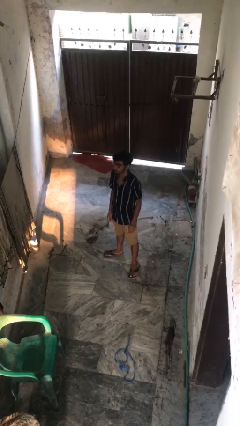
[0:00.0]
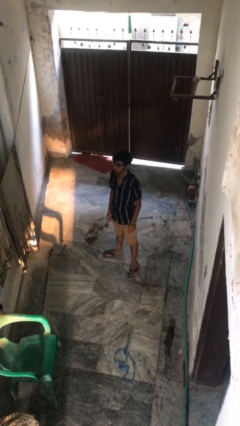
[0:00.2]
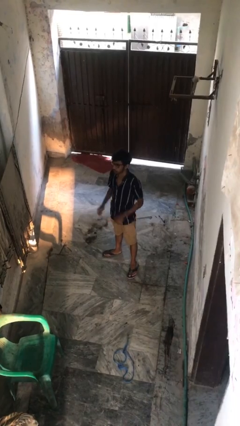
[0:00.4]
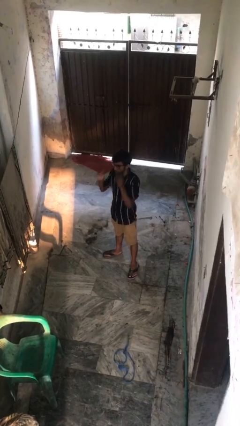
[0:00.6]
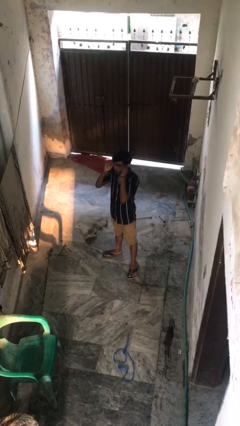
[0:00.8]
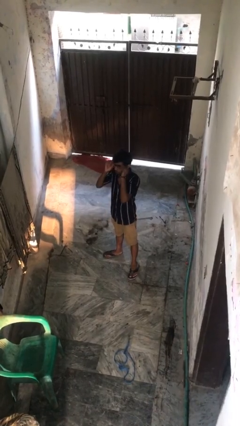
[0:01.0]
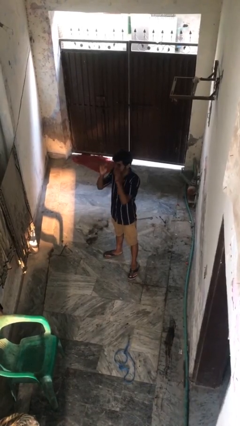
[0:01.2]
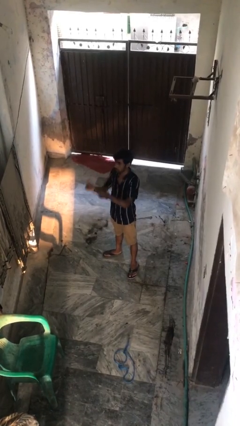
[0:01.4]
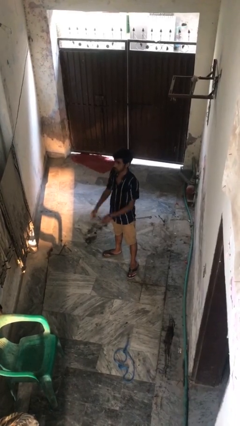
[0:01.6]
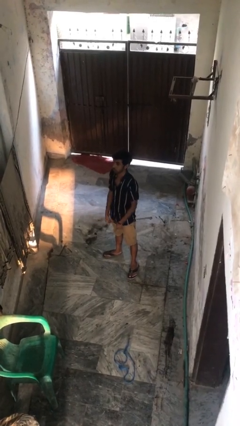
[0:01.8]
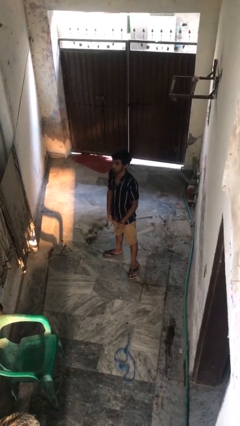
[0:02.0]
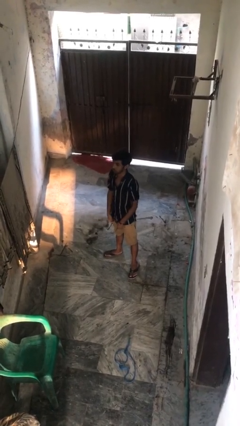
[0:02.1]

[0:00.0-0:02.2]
person takes off glasses

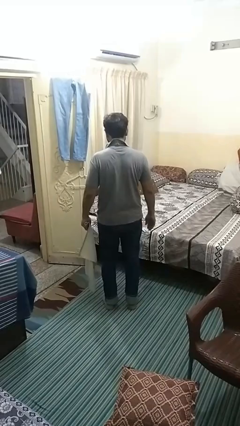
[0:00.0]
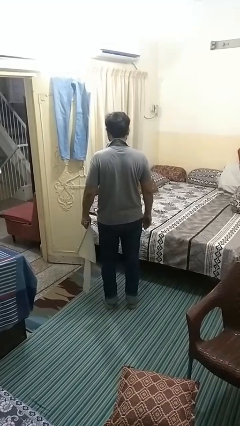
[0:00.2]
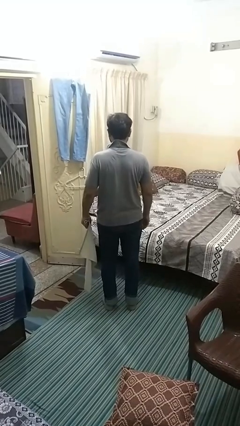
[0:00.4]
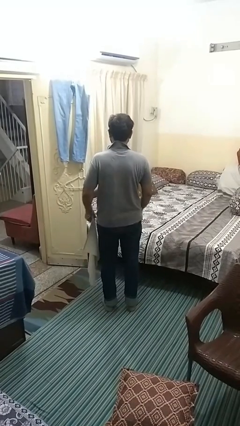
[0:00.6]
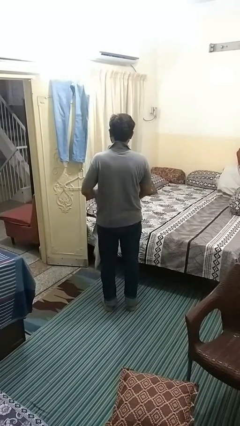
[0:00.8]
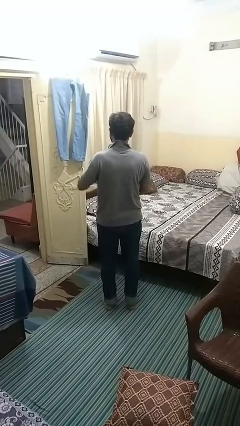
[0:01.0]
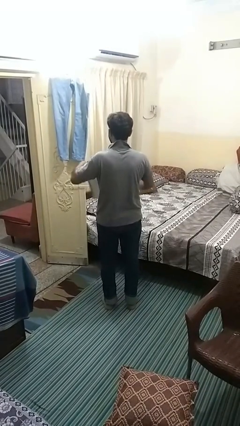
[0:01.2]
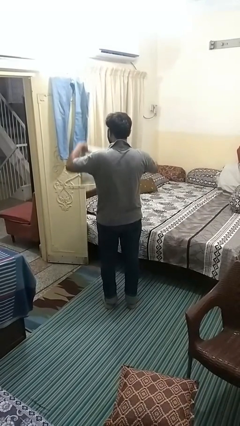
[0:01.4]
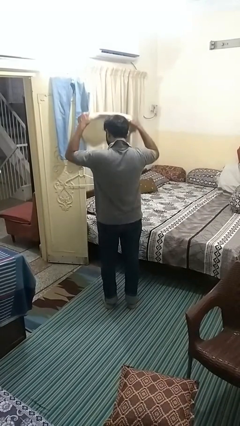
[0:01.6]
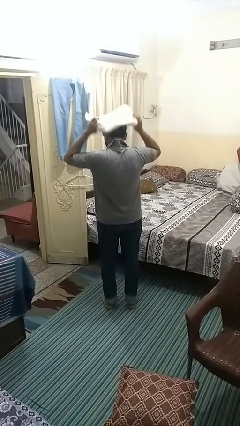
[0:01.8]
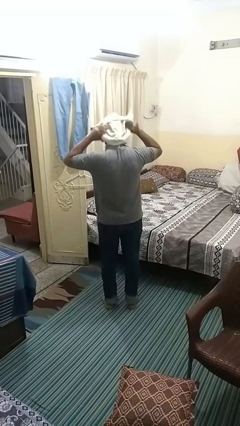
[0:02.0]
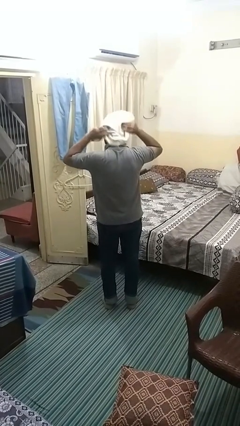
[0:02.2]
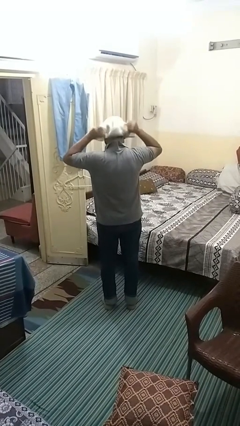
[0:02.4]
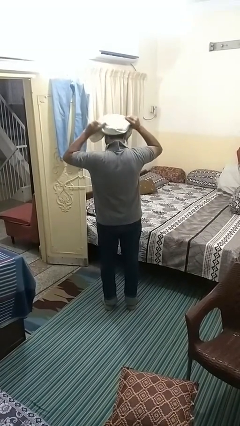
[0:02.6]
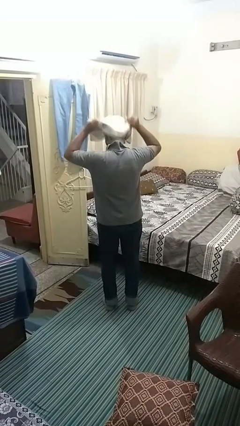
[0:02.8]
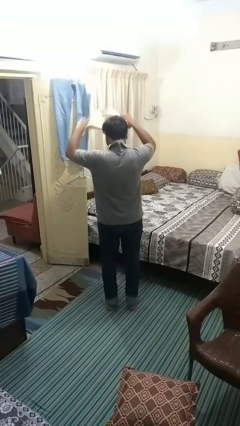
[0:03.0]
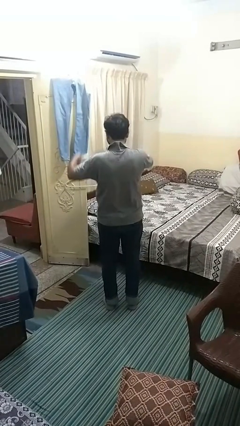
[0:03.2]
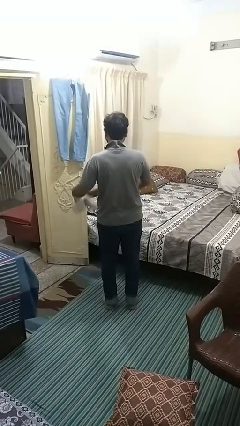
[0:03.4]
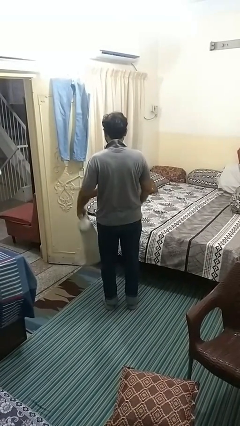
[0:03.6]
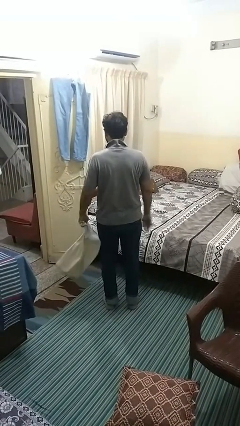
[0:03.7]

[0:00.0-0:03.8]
person dries hair with towel

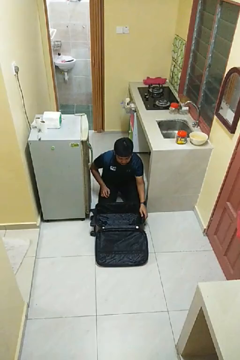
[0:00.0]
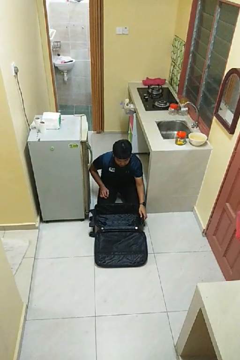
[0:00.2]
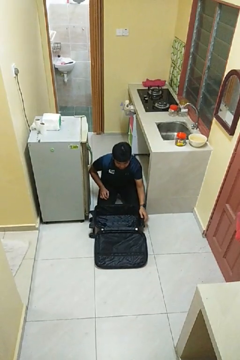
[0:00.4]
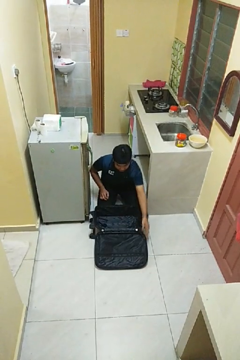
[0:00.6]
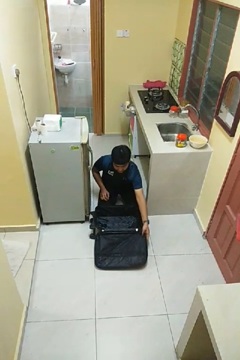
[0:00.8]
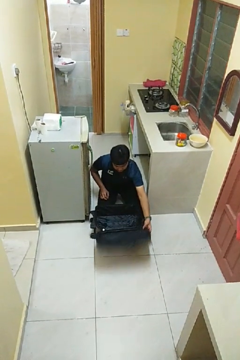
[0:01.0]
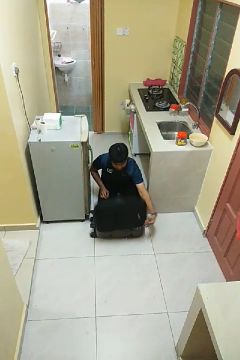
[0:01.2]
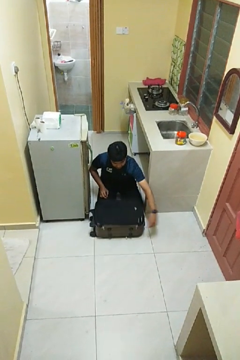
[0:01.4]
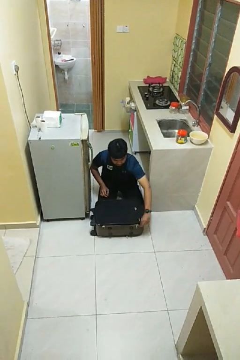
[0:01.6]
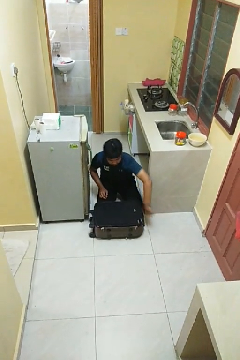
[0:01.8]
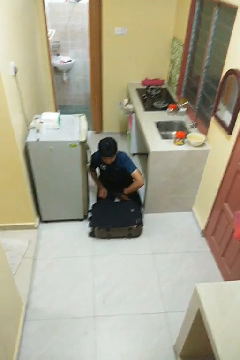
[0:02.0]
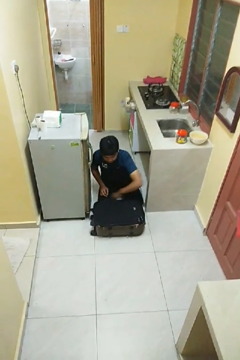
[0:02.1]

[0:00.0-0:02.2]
person closes suitcase

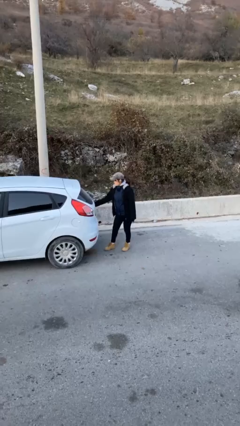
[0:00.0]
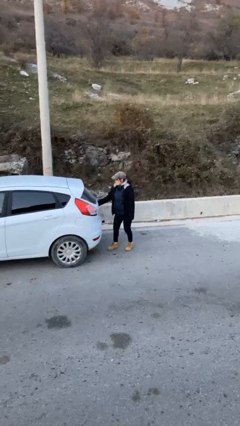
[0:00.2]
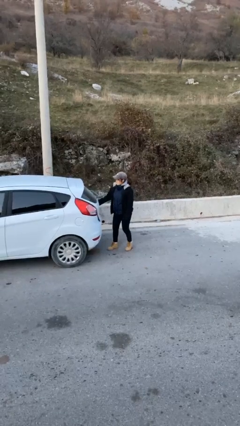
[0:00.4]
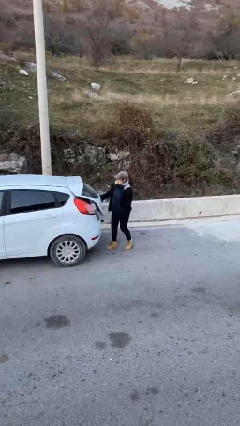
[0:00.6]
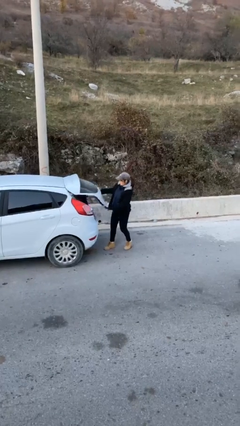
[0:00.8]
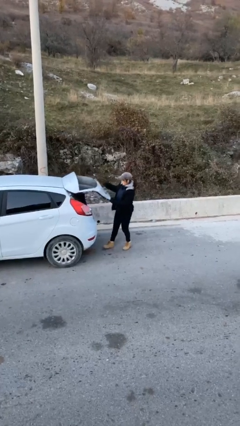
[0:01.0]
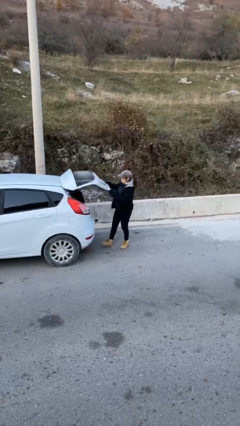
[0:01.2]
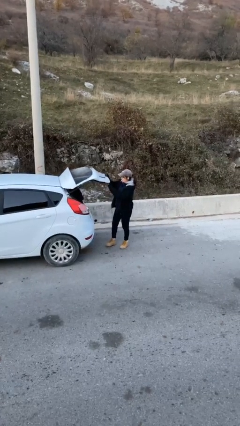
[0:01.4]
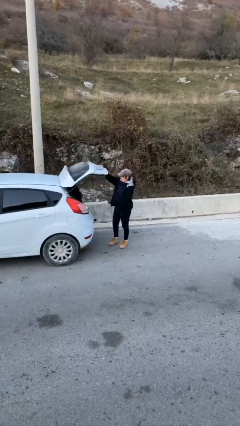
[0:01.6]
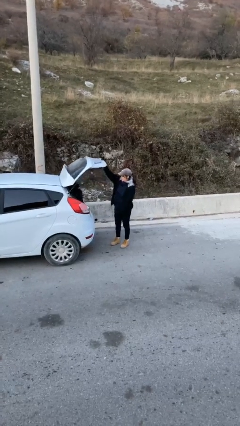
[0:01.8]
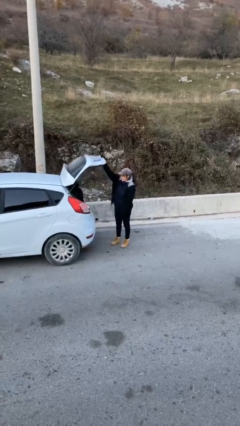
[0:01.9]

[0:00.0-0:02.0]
person opens car trunk

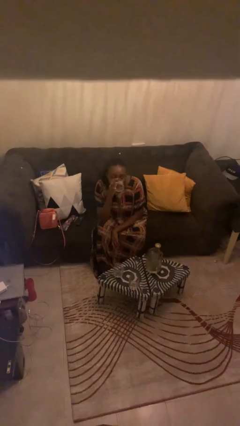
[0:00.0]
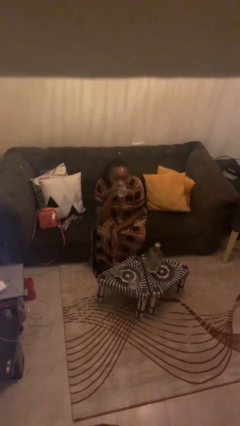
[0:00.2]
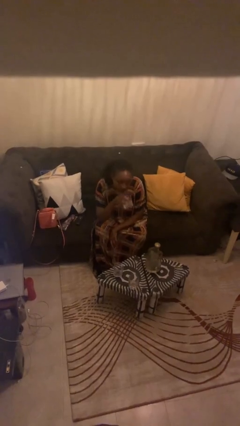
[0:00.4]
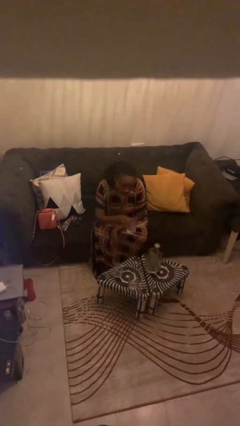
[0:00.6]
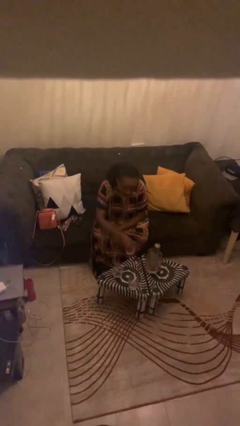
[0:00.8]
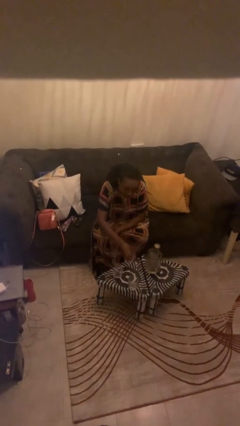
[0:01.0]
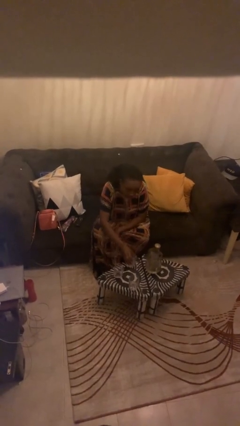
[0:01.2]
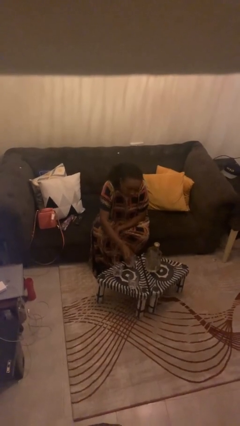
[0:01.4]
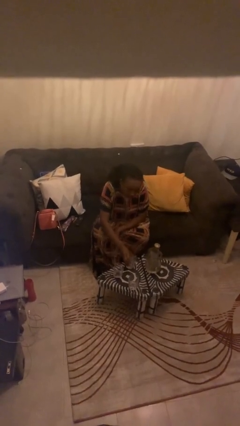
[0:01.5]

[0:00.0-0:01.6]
person puts down object on table

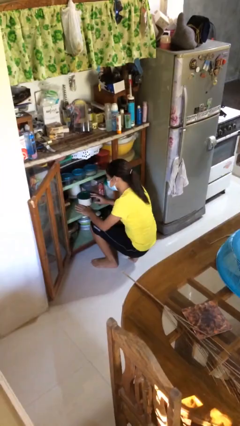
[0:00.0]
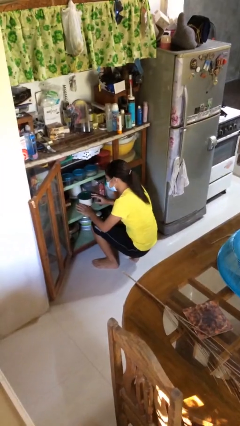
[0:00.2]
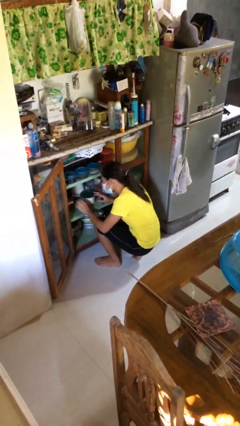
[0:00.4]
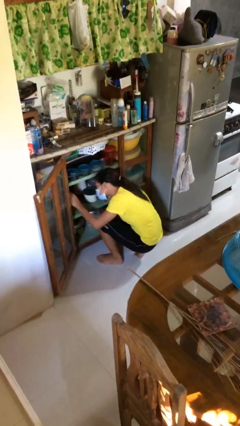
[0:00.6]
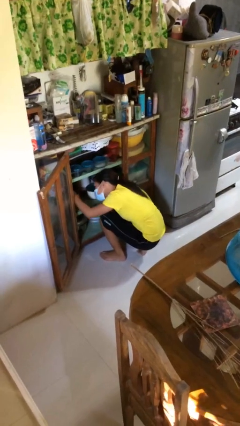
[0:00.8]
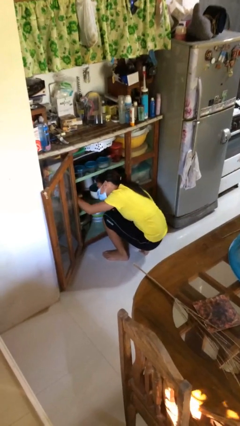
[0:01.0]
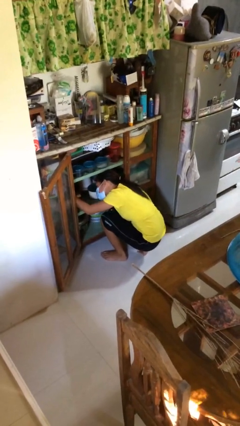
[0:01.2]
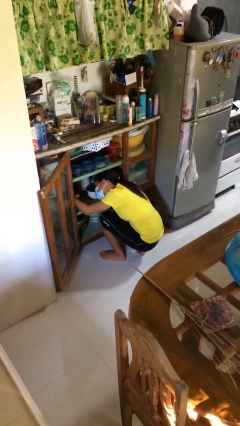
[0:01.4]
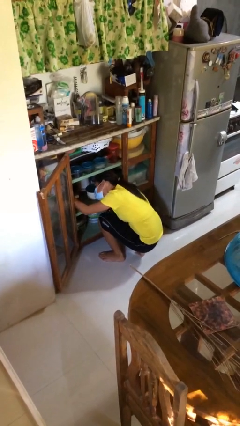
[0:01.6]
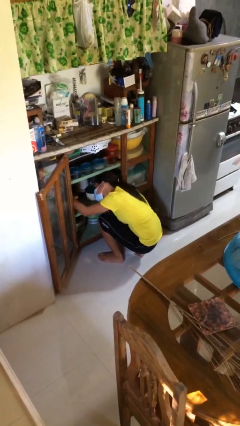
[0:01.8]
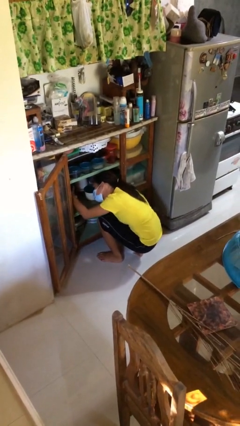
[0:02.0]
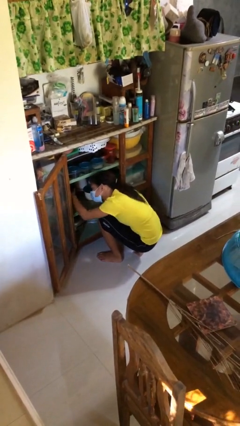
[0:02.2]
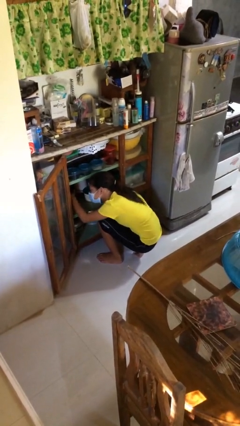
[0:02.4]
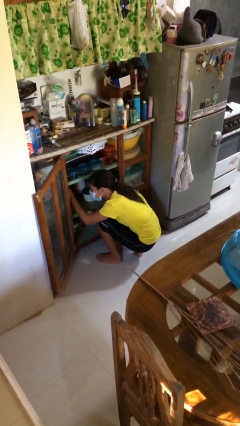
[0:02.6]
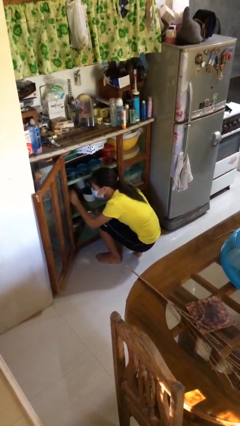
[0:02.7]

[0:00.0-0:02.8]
person searches in cabinet

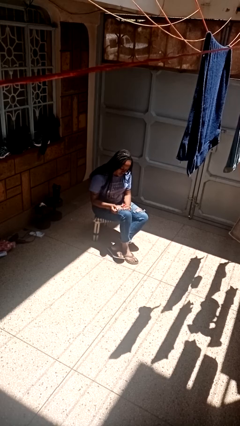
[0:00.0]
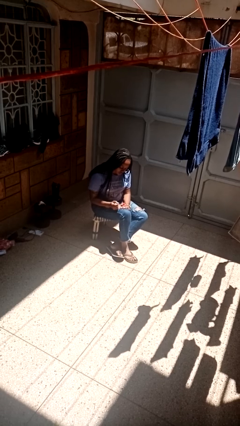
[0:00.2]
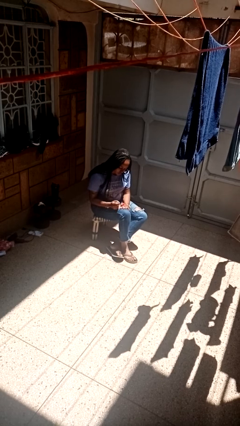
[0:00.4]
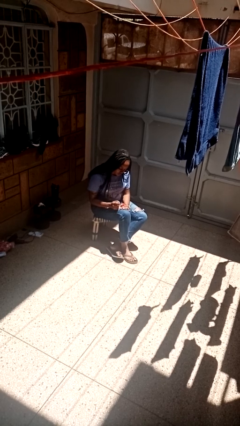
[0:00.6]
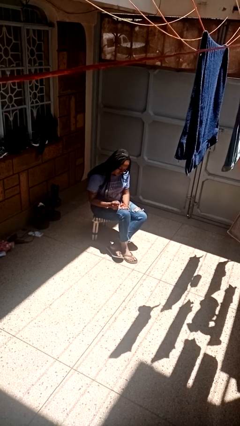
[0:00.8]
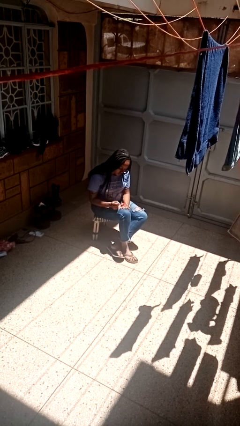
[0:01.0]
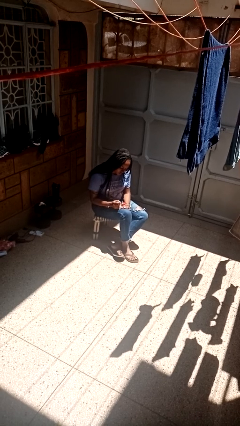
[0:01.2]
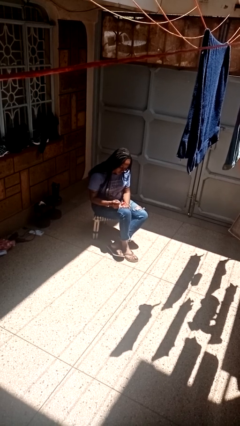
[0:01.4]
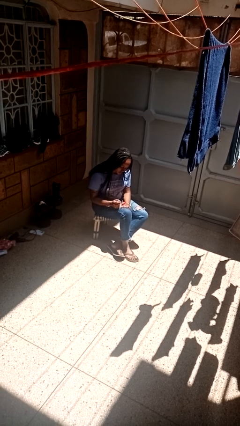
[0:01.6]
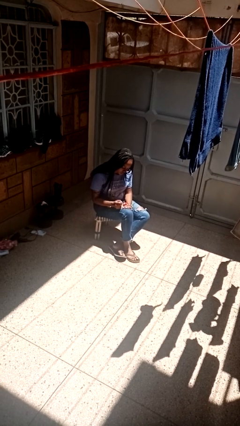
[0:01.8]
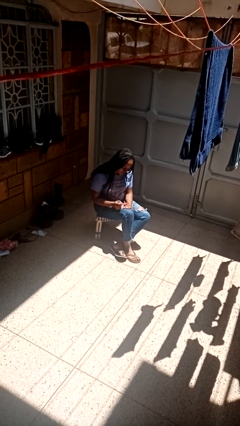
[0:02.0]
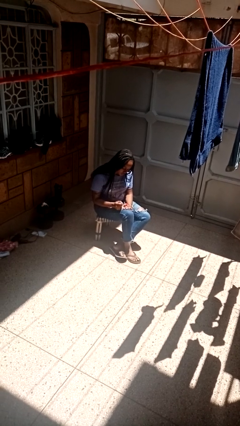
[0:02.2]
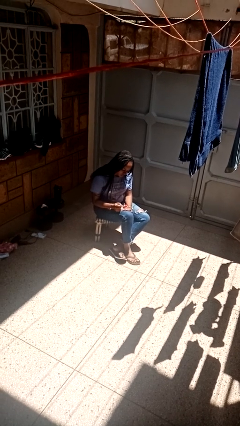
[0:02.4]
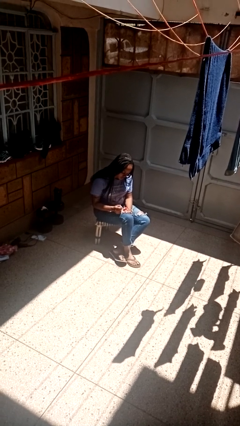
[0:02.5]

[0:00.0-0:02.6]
person paints fingernails

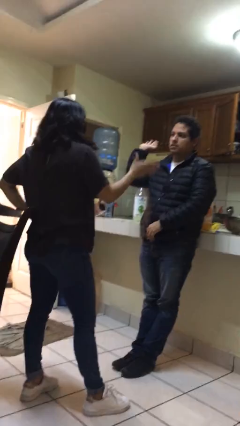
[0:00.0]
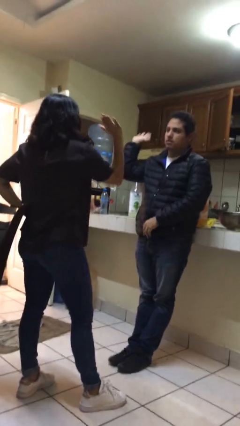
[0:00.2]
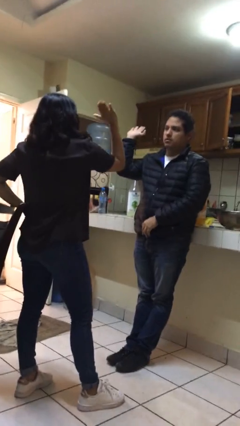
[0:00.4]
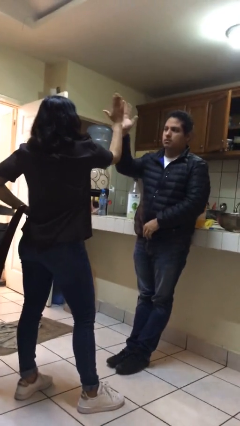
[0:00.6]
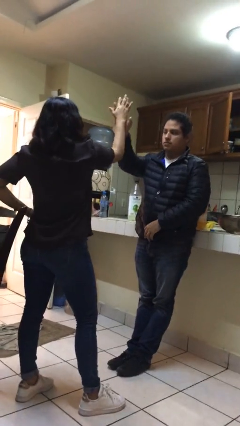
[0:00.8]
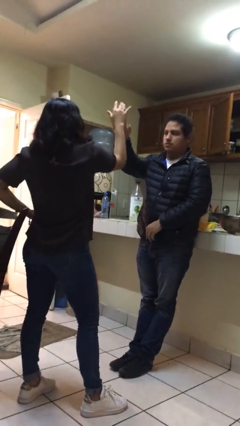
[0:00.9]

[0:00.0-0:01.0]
person highfives hand
